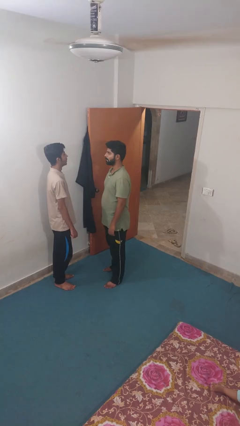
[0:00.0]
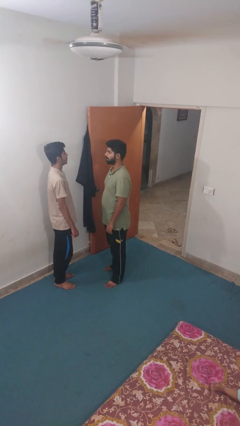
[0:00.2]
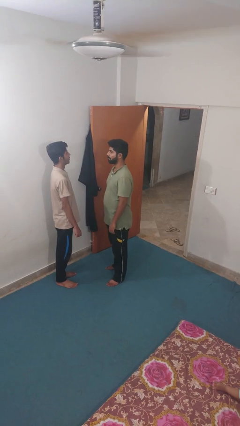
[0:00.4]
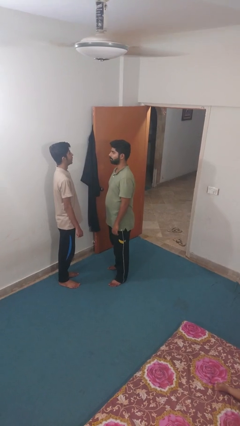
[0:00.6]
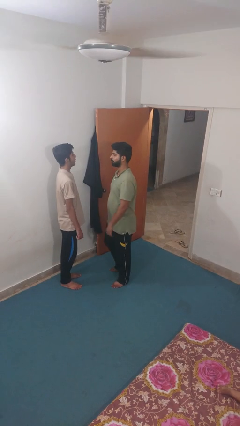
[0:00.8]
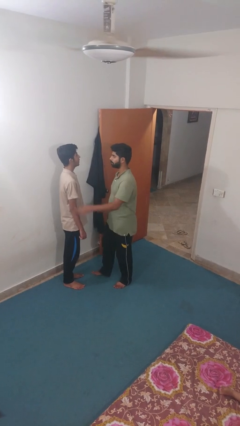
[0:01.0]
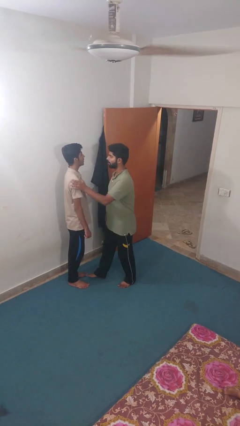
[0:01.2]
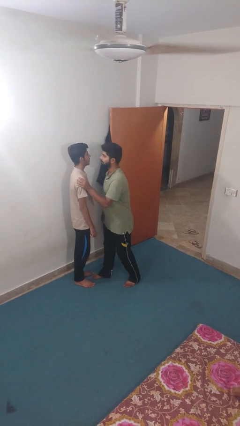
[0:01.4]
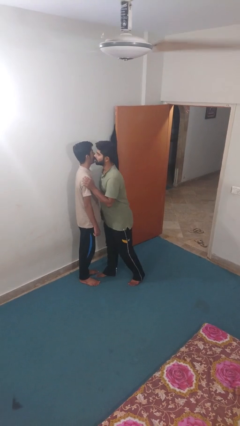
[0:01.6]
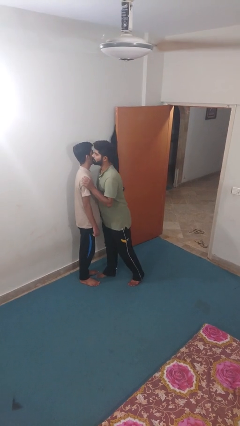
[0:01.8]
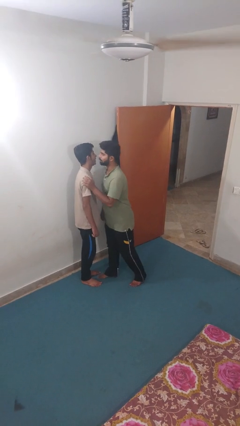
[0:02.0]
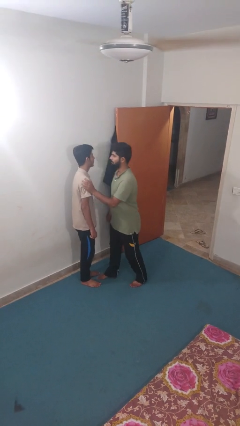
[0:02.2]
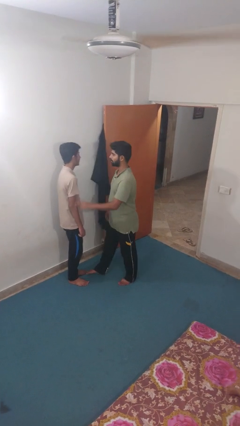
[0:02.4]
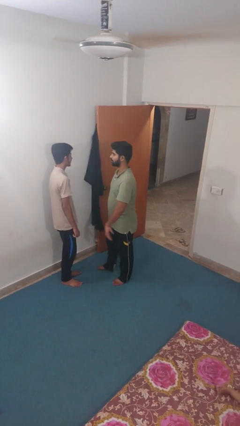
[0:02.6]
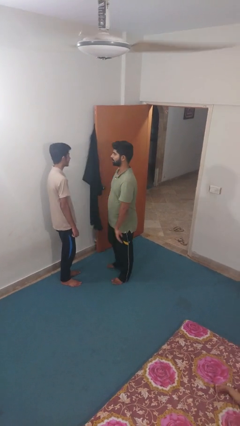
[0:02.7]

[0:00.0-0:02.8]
person kisses cheek of person

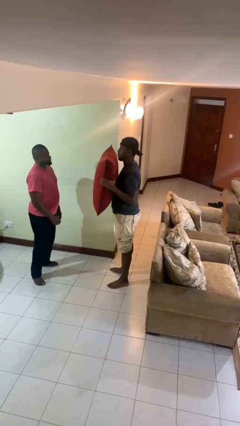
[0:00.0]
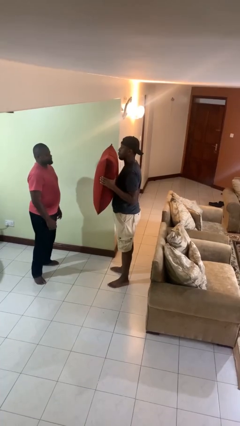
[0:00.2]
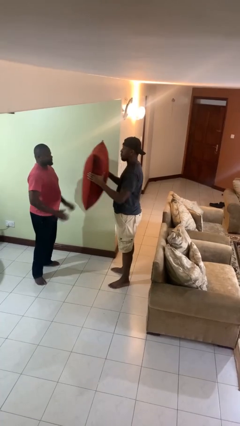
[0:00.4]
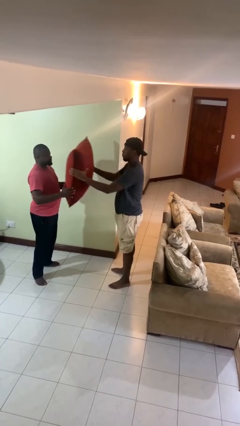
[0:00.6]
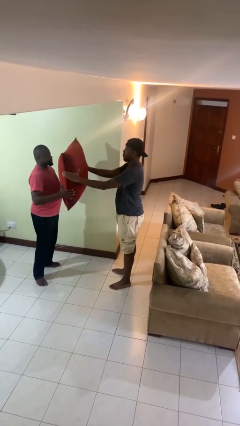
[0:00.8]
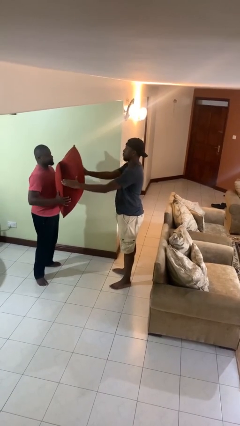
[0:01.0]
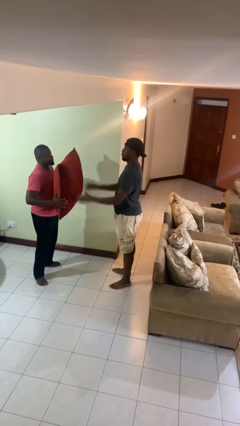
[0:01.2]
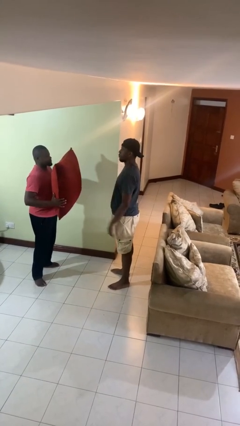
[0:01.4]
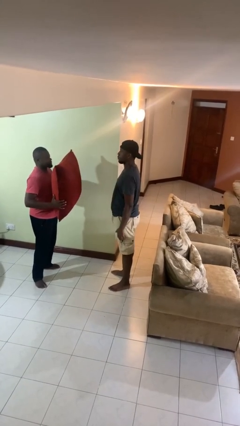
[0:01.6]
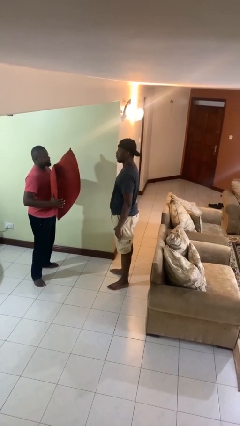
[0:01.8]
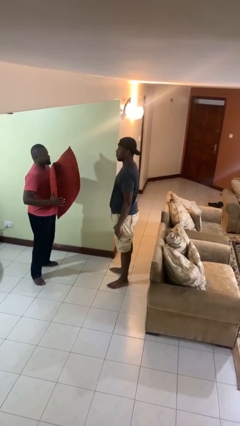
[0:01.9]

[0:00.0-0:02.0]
person transfers object to person

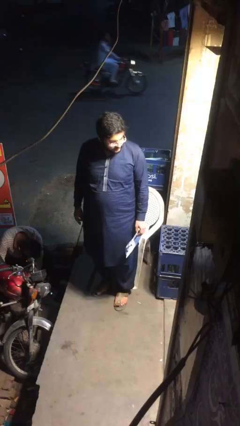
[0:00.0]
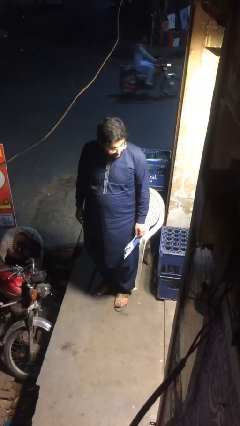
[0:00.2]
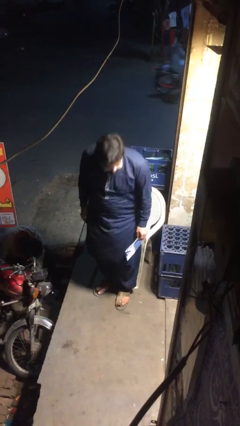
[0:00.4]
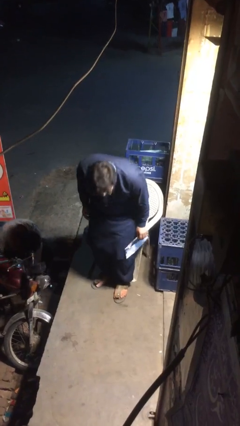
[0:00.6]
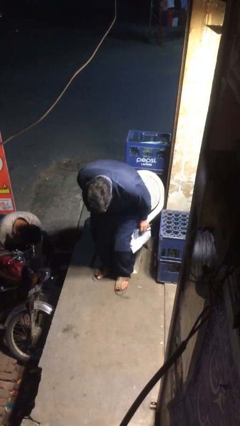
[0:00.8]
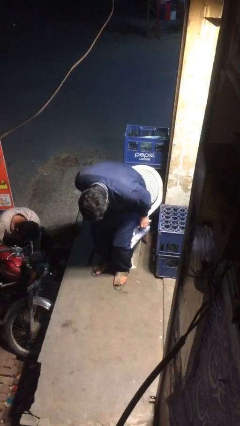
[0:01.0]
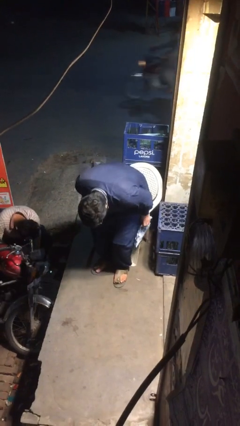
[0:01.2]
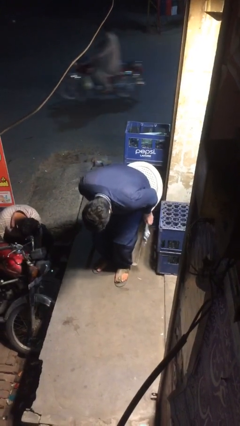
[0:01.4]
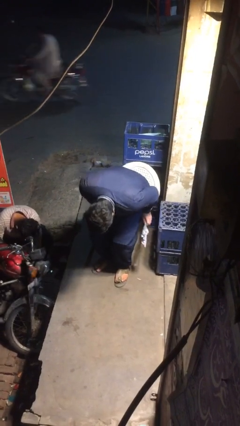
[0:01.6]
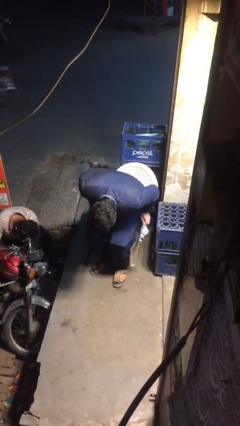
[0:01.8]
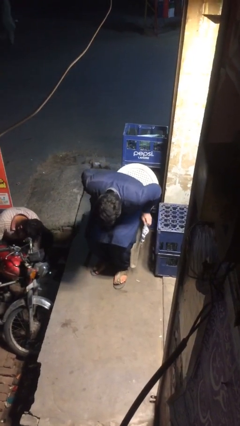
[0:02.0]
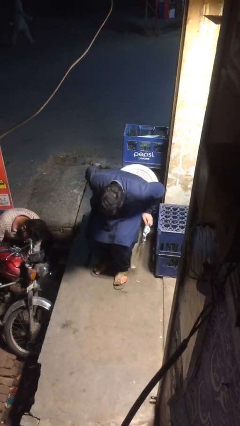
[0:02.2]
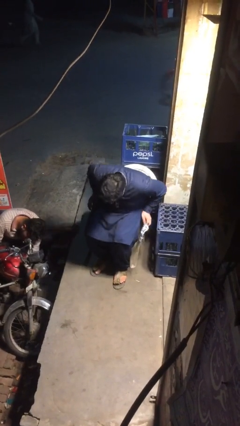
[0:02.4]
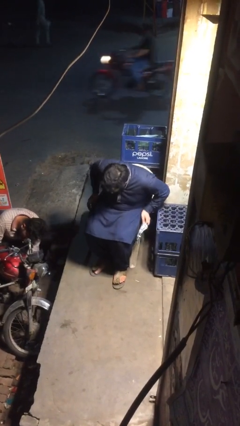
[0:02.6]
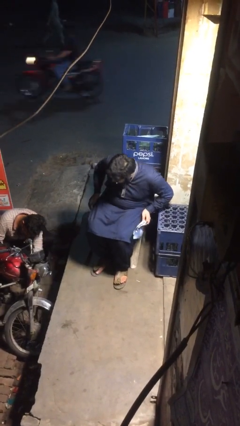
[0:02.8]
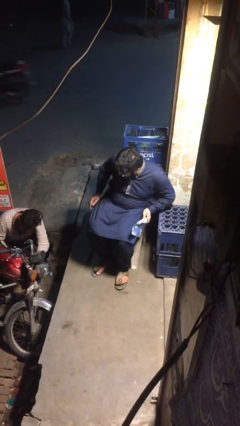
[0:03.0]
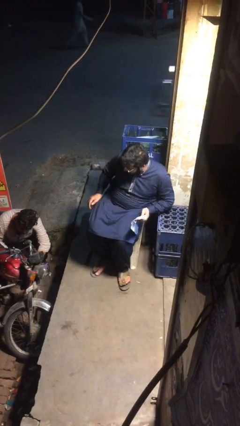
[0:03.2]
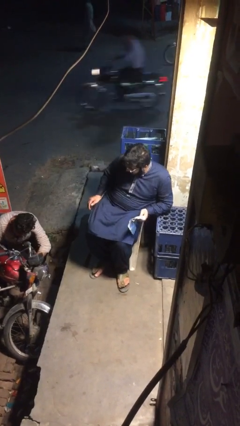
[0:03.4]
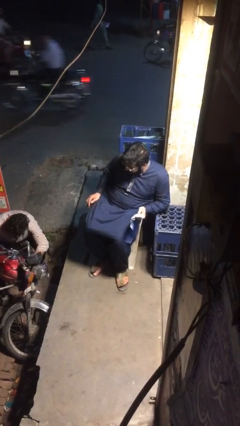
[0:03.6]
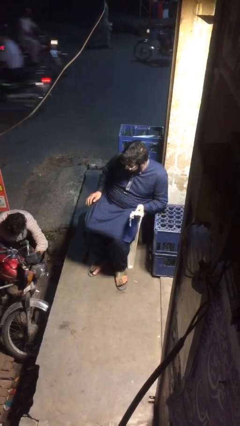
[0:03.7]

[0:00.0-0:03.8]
person sits down

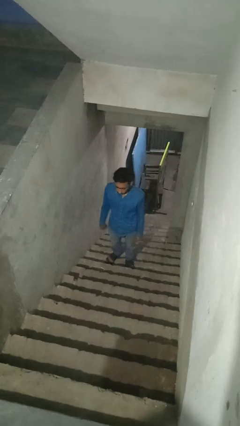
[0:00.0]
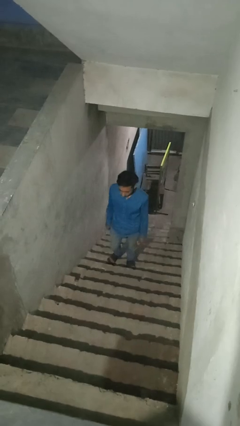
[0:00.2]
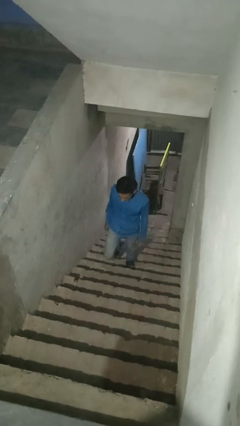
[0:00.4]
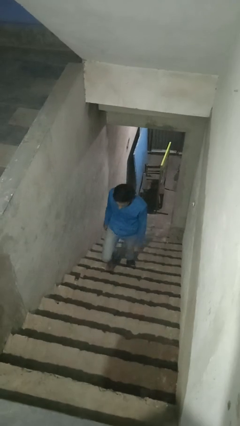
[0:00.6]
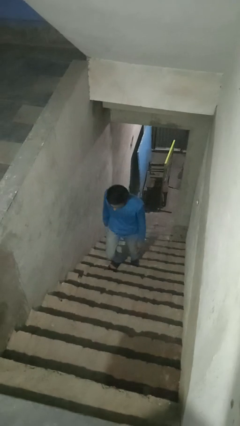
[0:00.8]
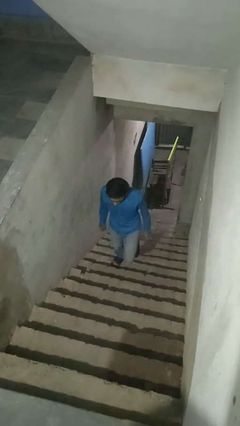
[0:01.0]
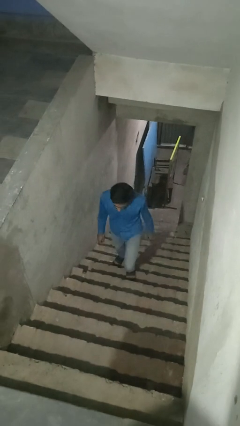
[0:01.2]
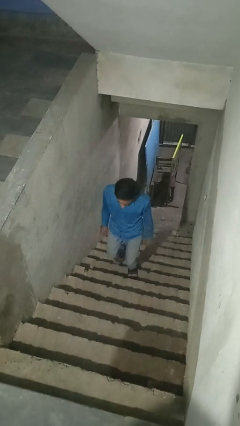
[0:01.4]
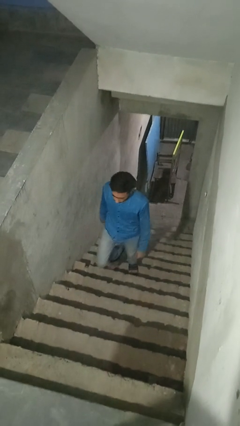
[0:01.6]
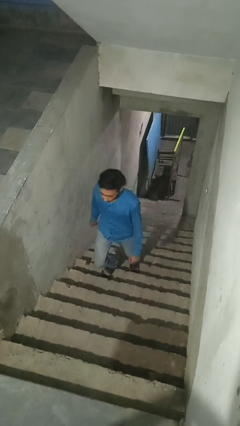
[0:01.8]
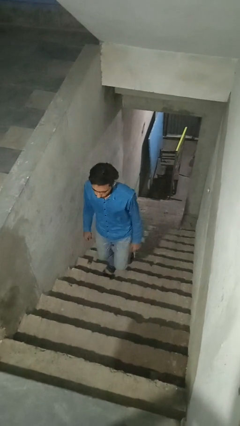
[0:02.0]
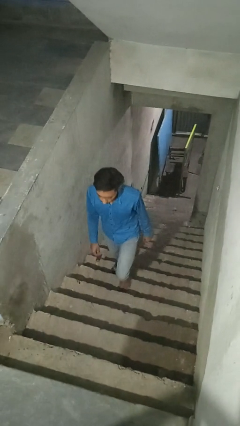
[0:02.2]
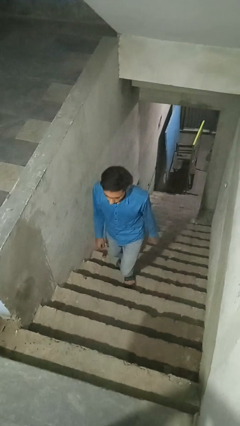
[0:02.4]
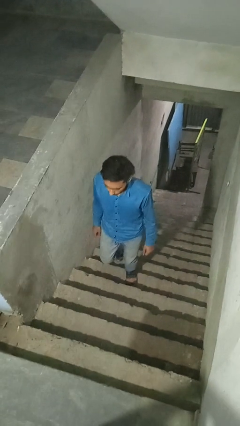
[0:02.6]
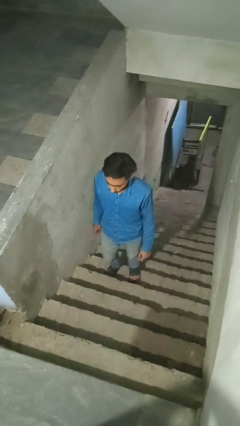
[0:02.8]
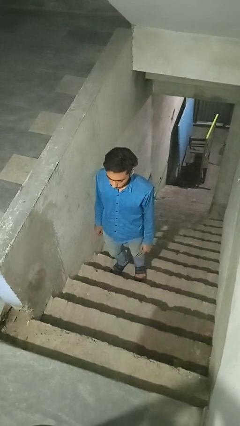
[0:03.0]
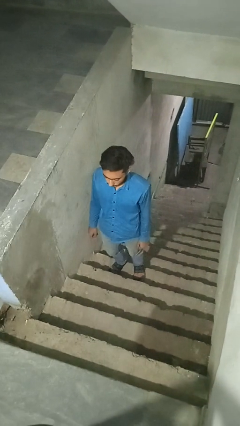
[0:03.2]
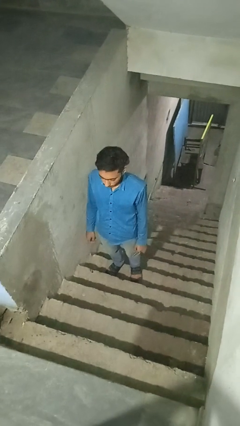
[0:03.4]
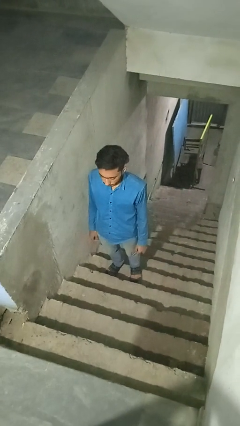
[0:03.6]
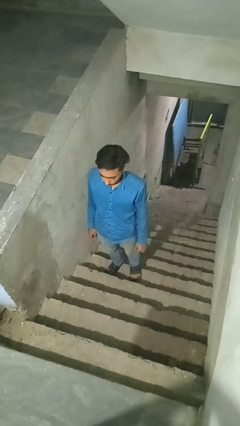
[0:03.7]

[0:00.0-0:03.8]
person climbs up stairs

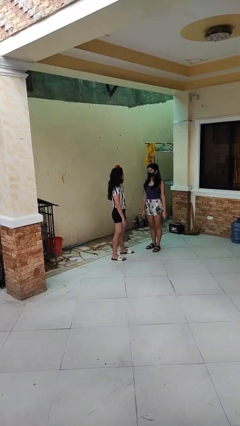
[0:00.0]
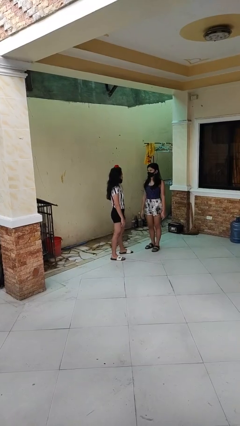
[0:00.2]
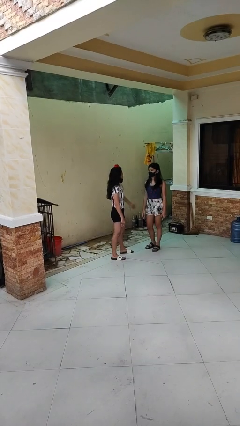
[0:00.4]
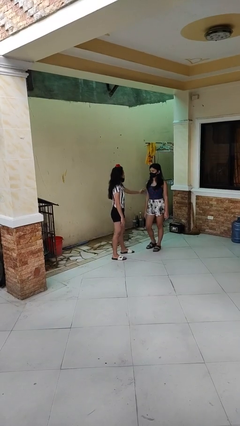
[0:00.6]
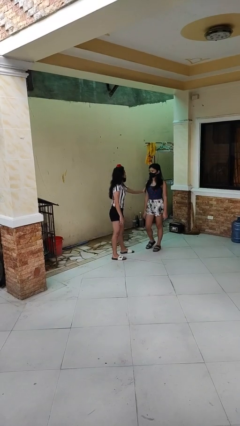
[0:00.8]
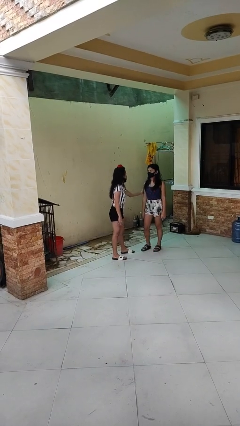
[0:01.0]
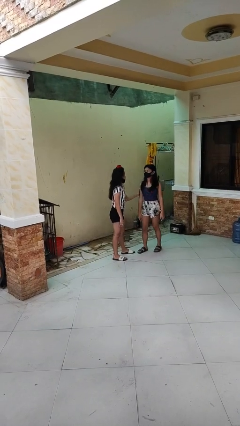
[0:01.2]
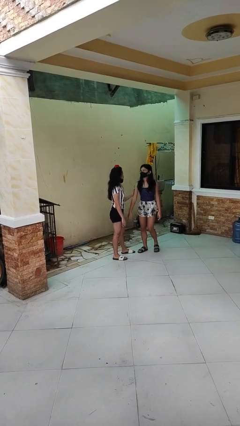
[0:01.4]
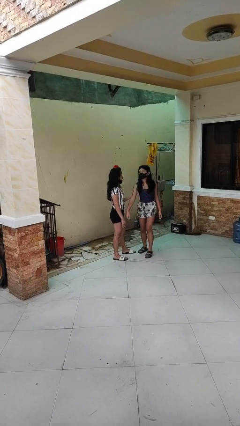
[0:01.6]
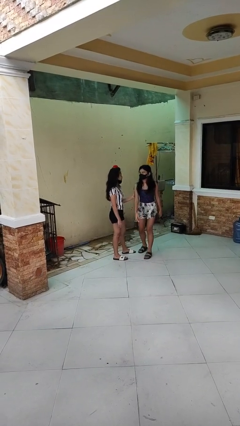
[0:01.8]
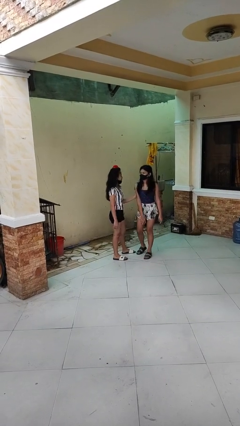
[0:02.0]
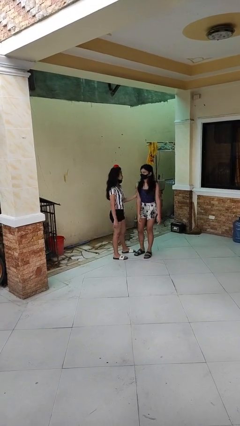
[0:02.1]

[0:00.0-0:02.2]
person grabs person by bicep

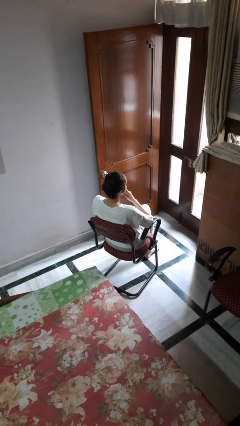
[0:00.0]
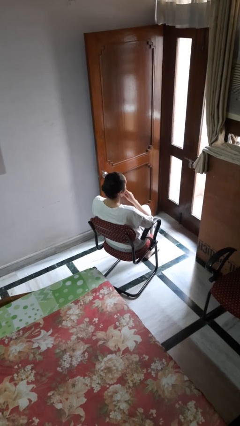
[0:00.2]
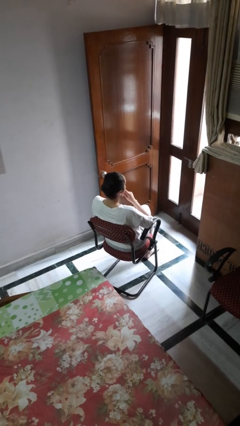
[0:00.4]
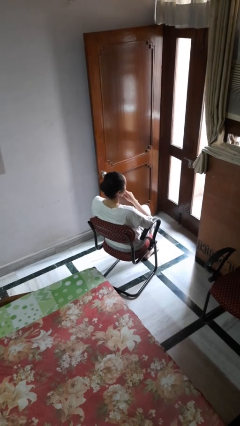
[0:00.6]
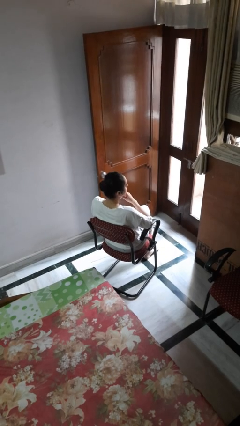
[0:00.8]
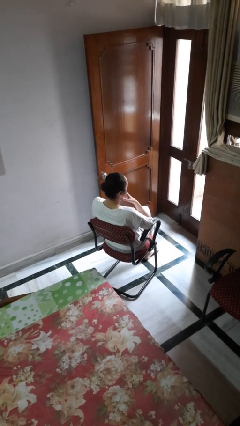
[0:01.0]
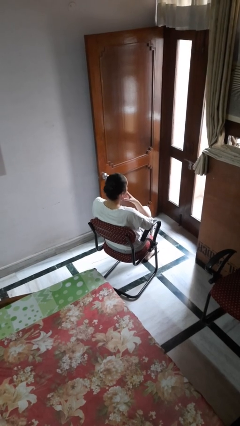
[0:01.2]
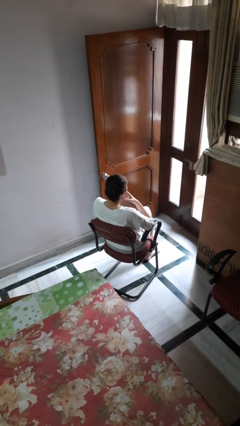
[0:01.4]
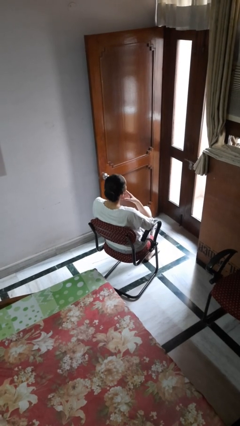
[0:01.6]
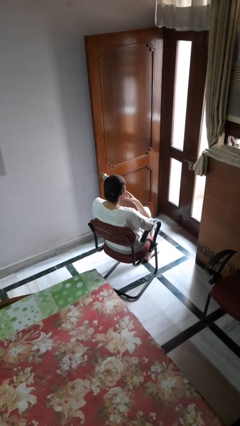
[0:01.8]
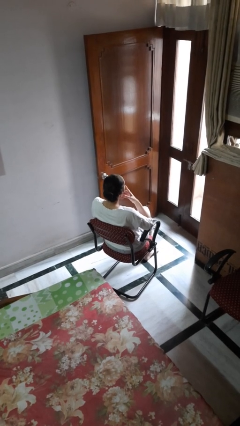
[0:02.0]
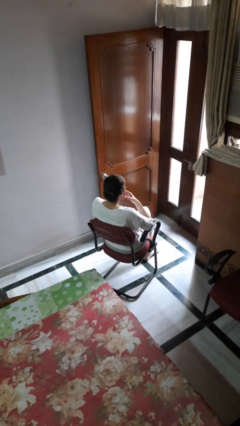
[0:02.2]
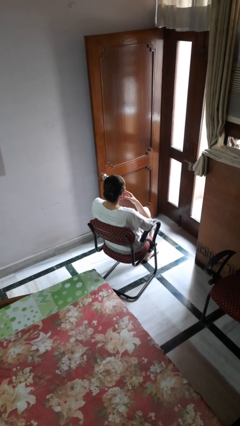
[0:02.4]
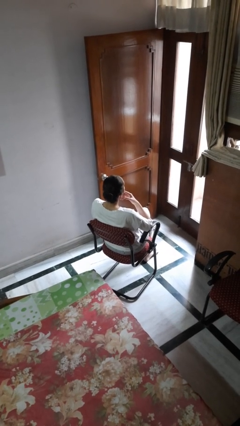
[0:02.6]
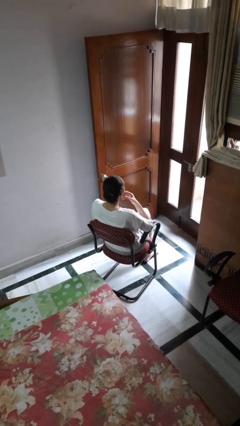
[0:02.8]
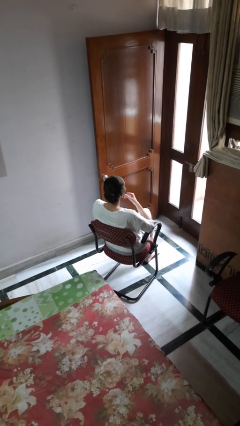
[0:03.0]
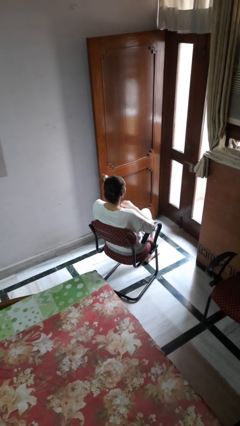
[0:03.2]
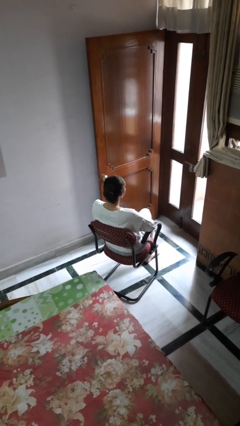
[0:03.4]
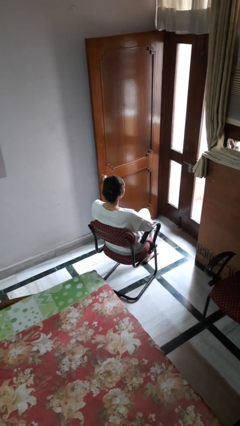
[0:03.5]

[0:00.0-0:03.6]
person strokes chin
